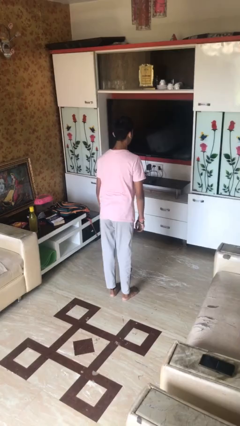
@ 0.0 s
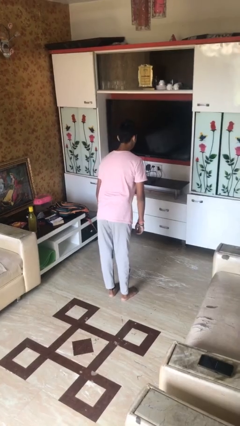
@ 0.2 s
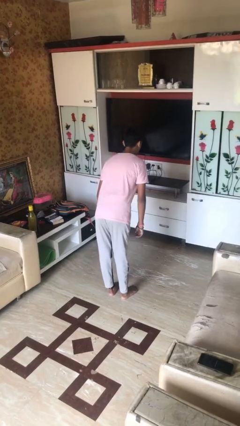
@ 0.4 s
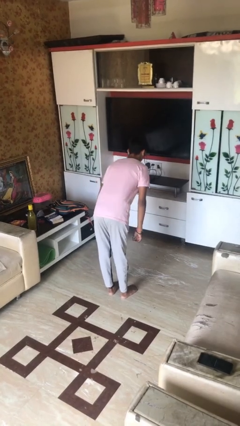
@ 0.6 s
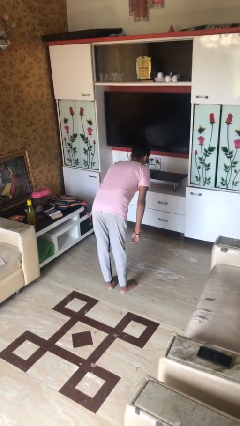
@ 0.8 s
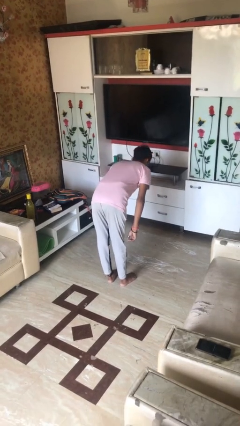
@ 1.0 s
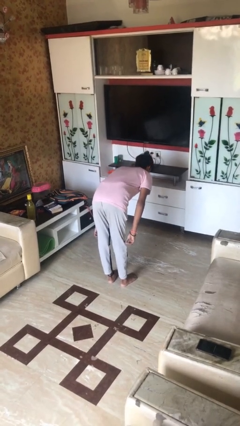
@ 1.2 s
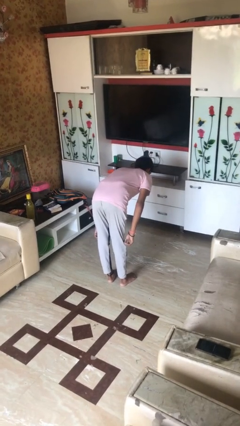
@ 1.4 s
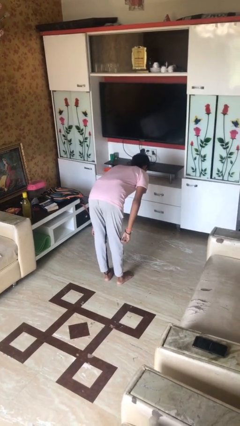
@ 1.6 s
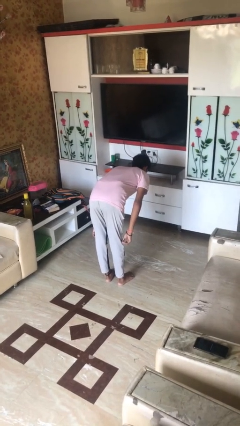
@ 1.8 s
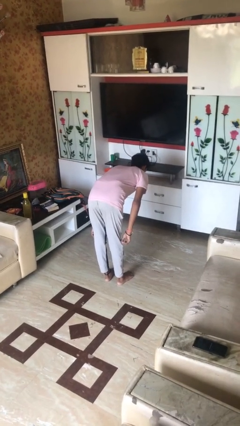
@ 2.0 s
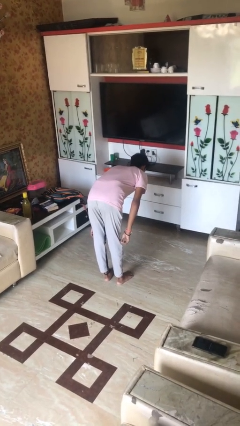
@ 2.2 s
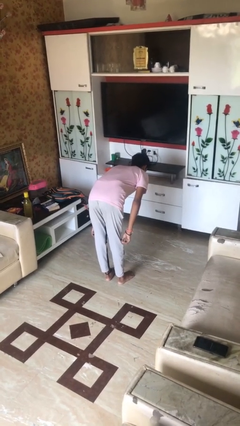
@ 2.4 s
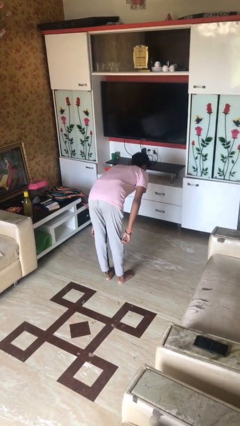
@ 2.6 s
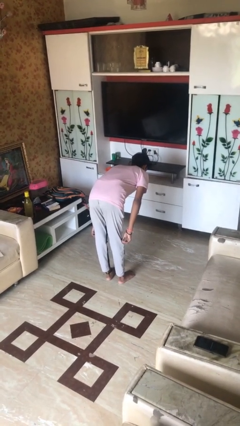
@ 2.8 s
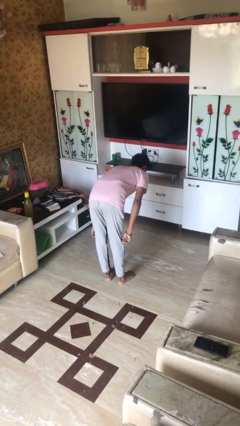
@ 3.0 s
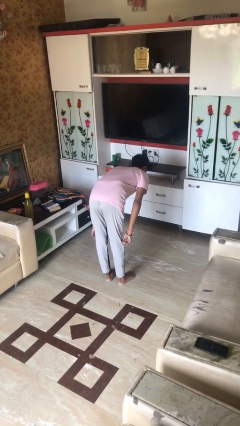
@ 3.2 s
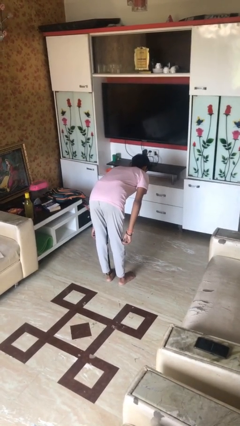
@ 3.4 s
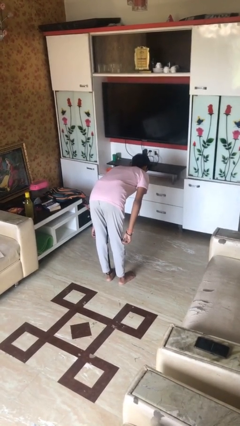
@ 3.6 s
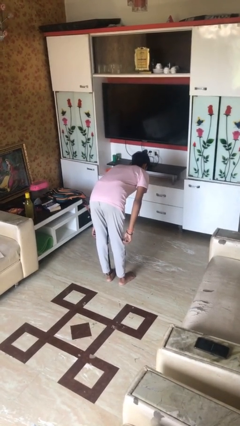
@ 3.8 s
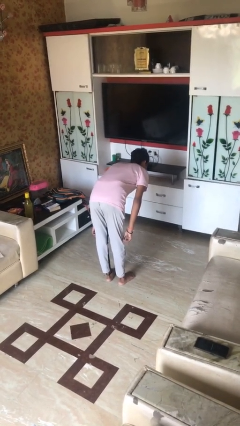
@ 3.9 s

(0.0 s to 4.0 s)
person bows

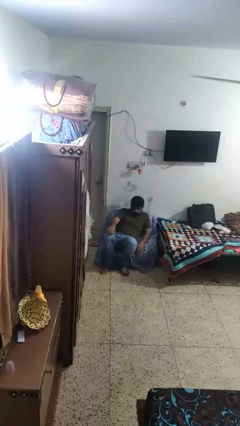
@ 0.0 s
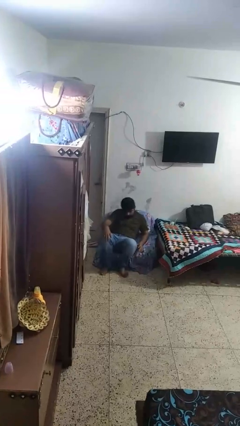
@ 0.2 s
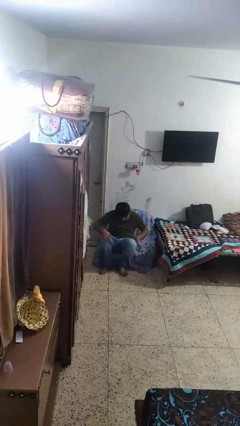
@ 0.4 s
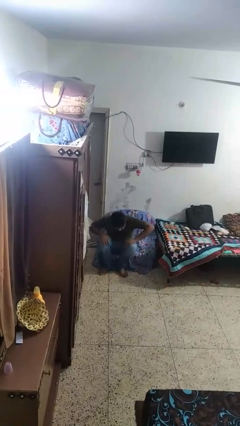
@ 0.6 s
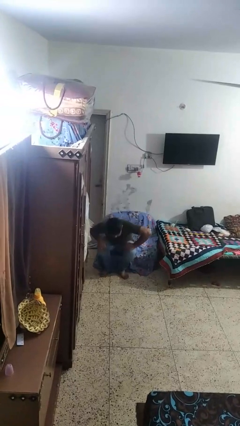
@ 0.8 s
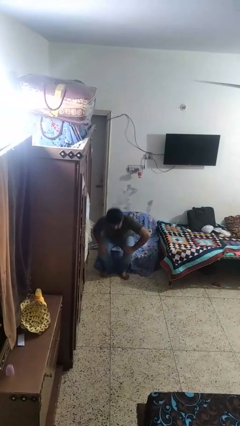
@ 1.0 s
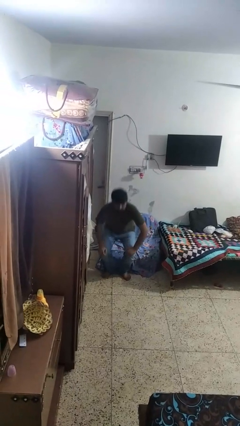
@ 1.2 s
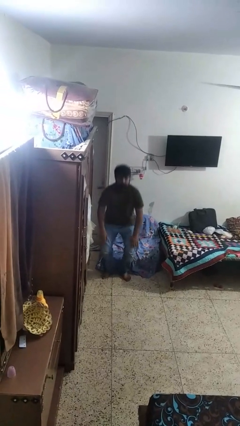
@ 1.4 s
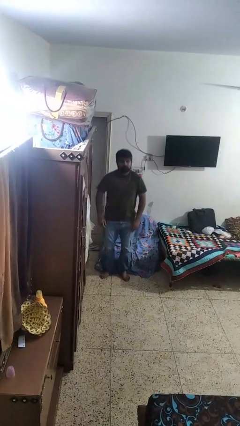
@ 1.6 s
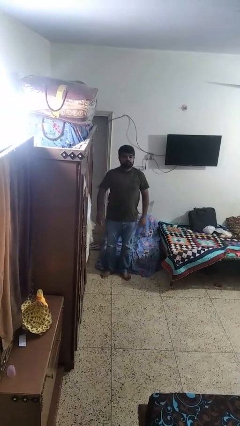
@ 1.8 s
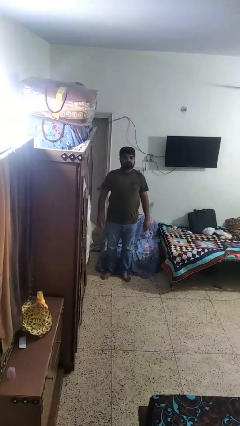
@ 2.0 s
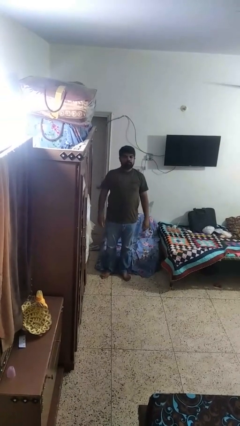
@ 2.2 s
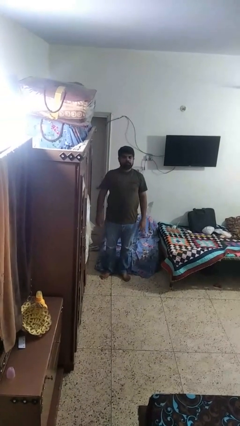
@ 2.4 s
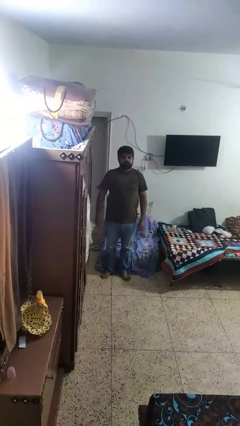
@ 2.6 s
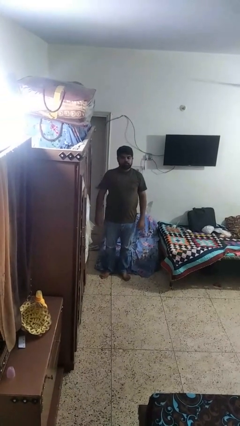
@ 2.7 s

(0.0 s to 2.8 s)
person stands up

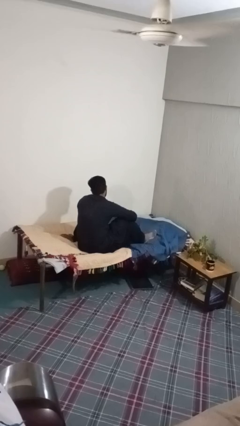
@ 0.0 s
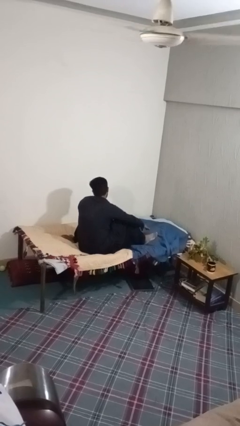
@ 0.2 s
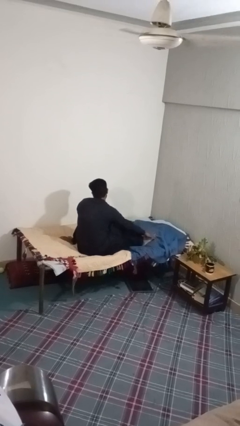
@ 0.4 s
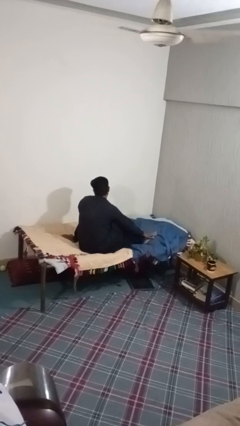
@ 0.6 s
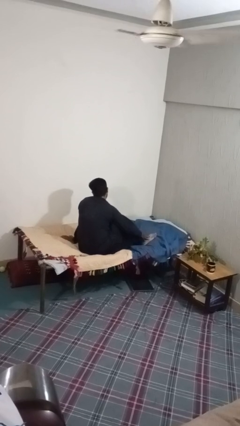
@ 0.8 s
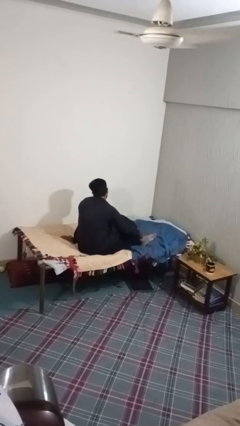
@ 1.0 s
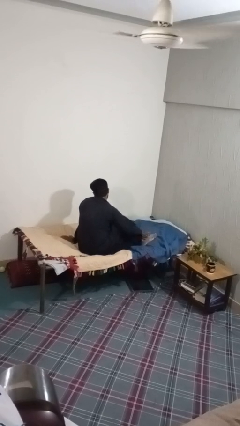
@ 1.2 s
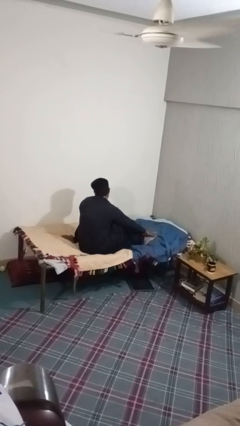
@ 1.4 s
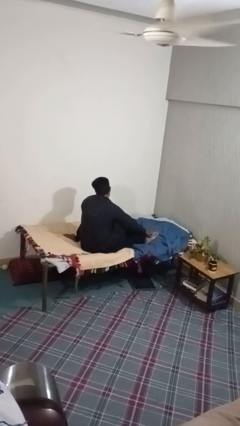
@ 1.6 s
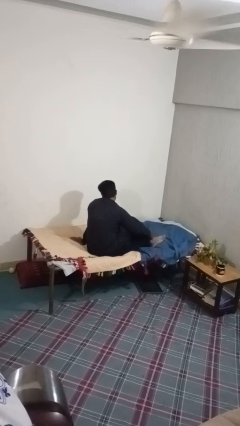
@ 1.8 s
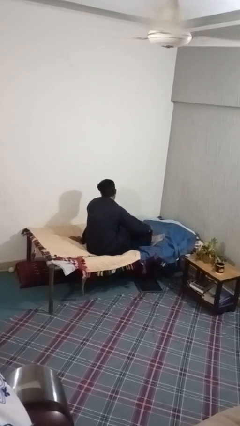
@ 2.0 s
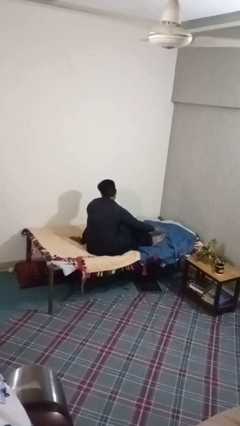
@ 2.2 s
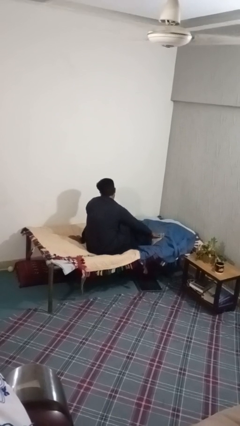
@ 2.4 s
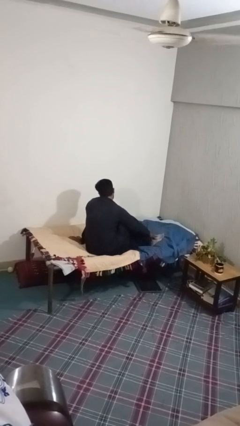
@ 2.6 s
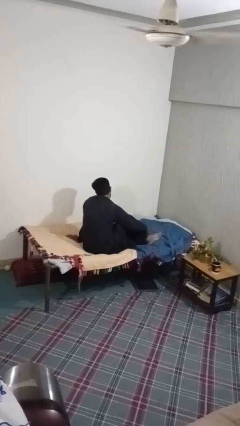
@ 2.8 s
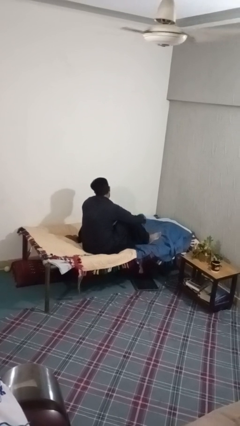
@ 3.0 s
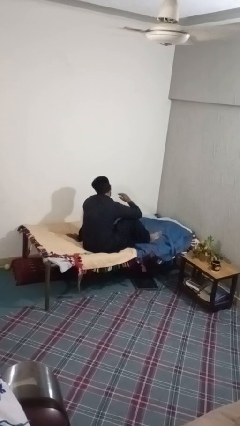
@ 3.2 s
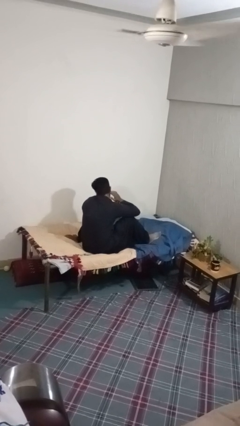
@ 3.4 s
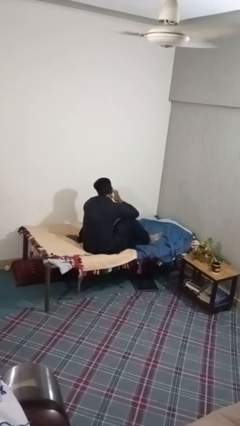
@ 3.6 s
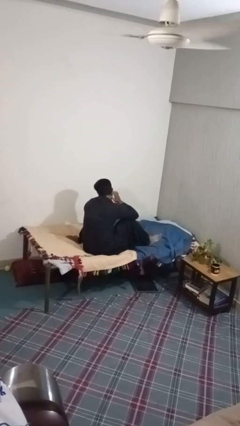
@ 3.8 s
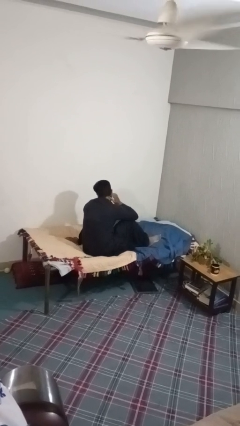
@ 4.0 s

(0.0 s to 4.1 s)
person rubs foot

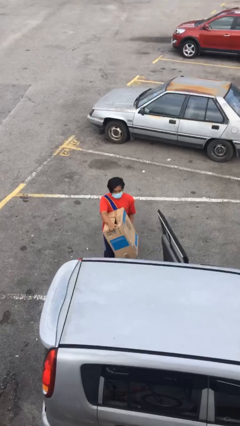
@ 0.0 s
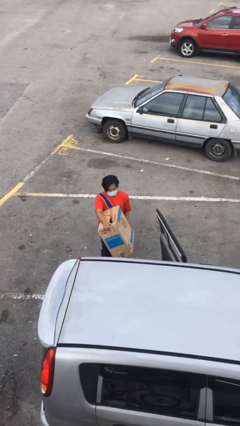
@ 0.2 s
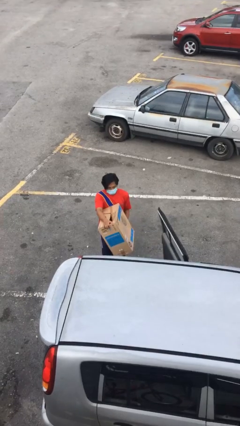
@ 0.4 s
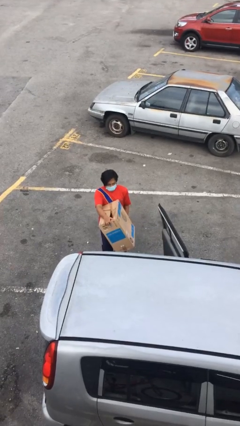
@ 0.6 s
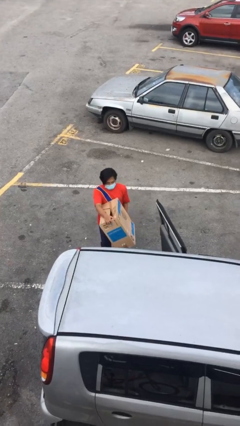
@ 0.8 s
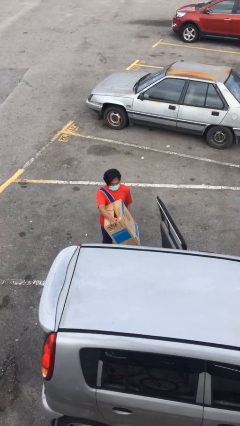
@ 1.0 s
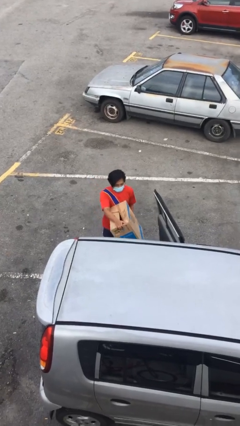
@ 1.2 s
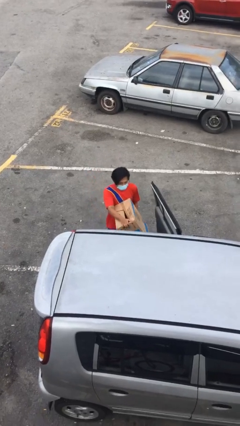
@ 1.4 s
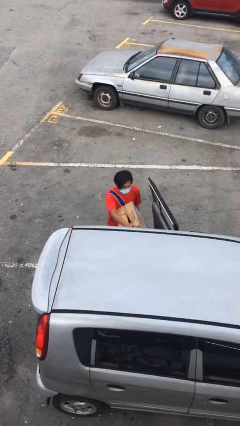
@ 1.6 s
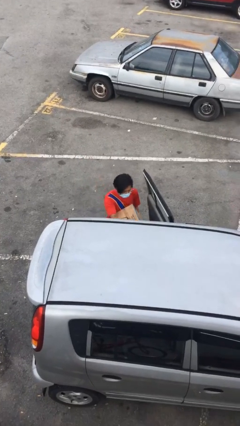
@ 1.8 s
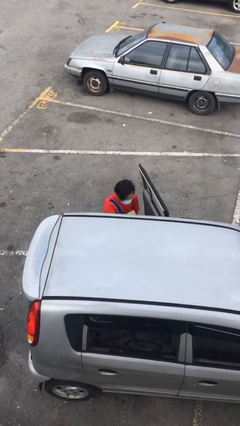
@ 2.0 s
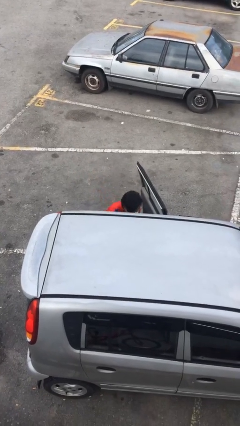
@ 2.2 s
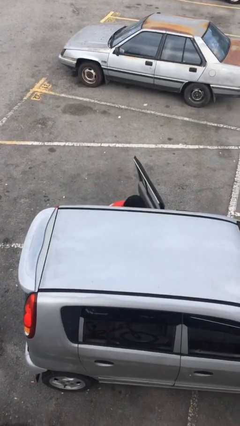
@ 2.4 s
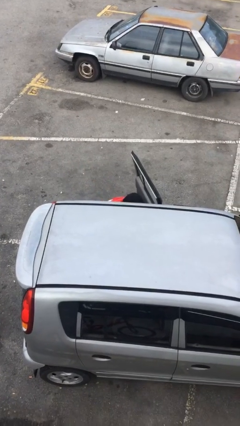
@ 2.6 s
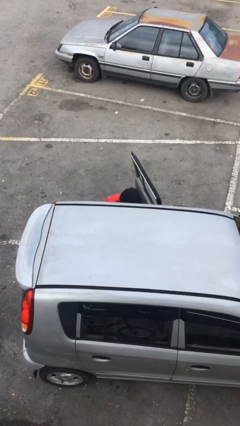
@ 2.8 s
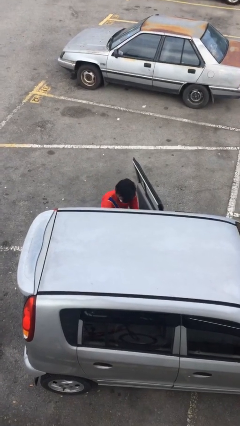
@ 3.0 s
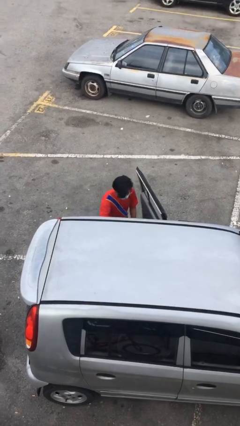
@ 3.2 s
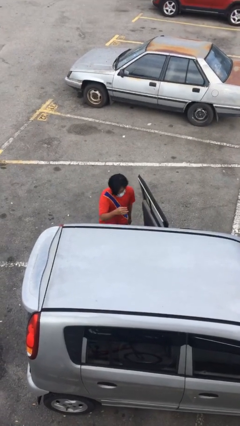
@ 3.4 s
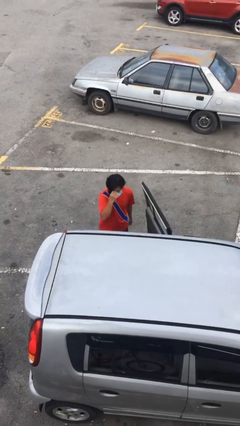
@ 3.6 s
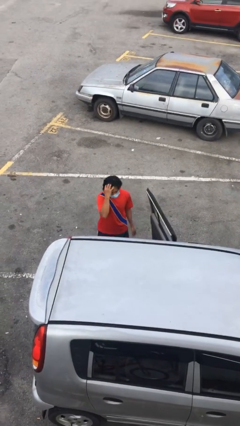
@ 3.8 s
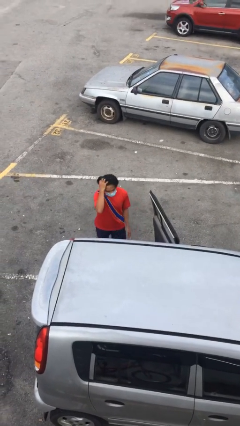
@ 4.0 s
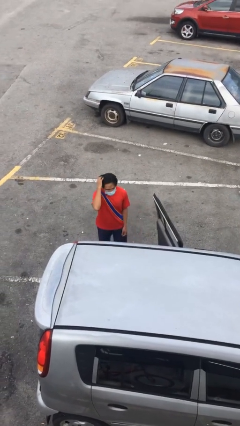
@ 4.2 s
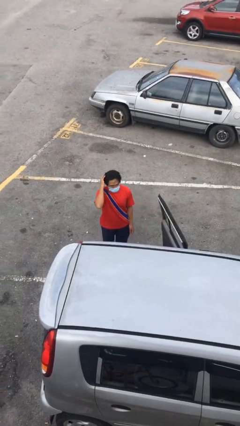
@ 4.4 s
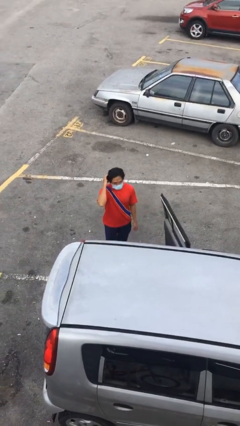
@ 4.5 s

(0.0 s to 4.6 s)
person loads car

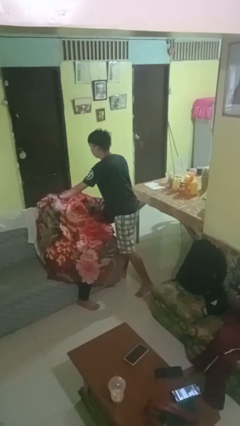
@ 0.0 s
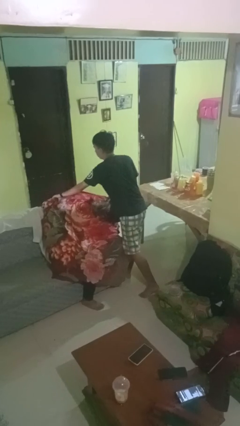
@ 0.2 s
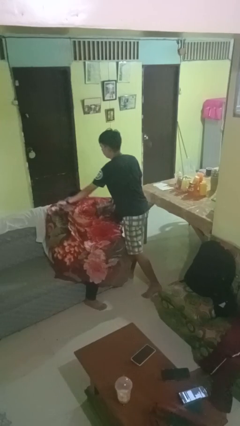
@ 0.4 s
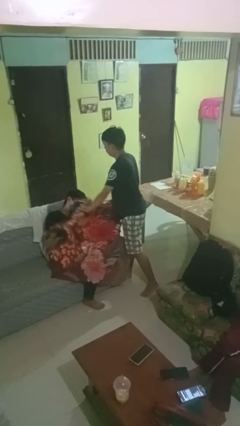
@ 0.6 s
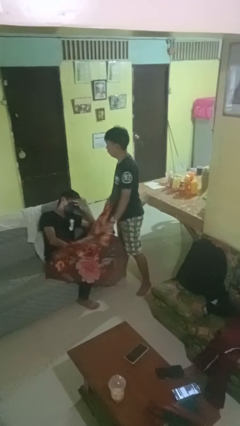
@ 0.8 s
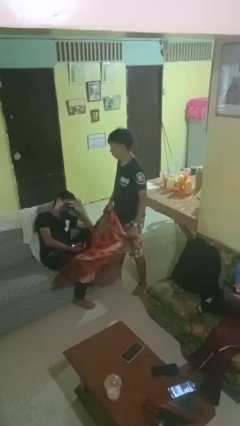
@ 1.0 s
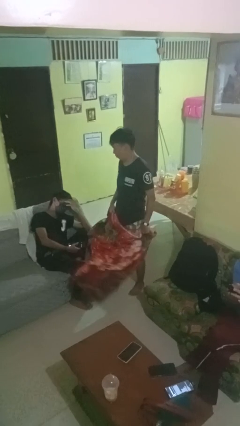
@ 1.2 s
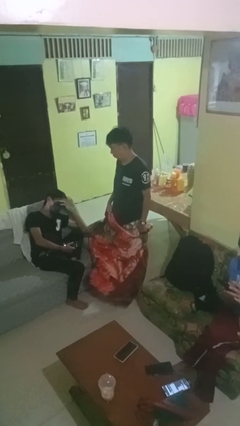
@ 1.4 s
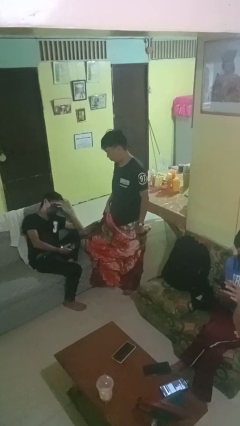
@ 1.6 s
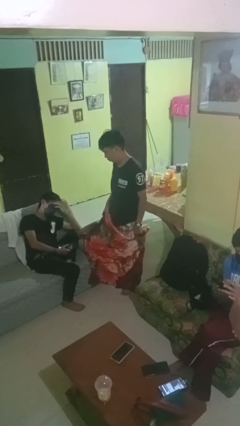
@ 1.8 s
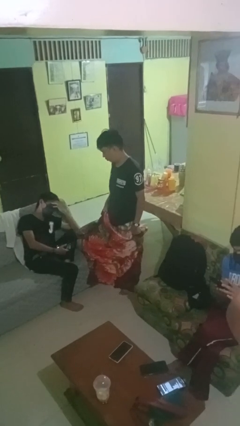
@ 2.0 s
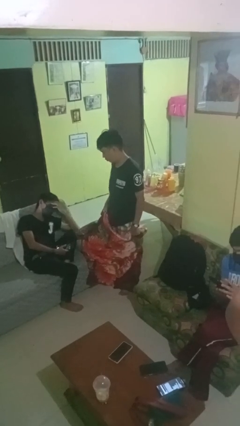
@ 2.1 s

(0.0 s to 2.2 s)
person uncovers friend with blanket
